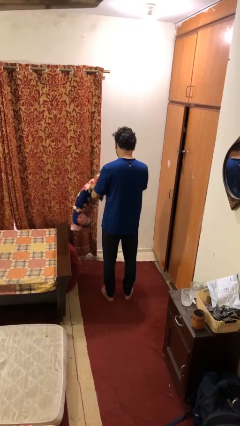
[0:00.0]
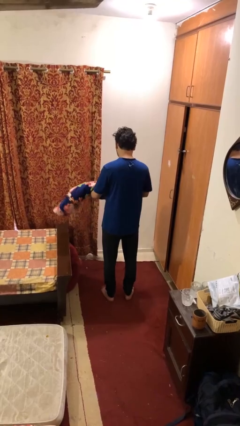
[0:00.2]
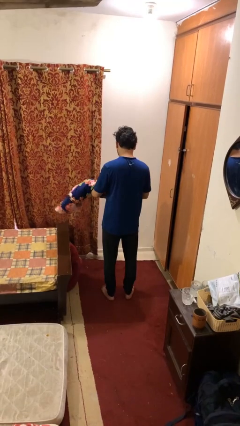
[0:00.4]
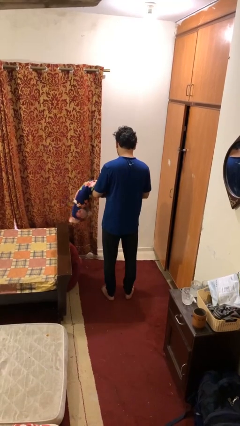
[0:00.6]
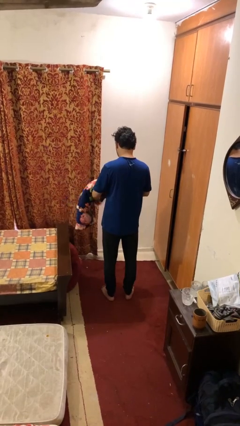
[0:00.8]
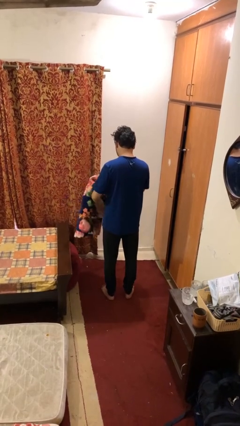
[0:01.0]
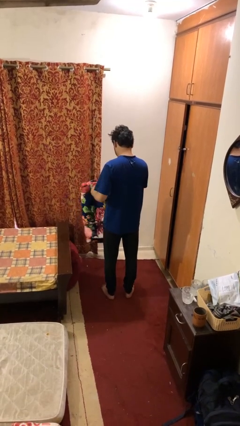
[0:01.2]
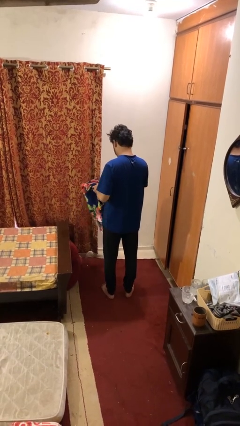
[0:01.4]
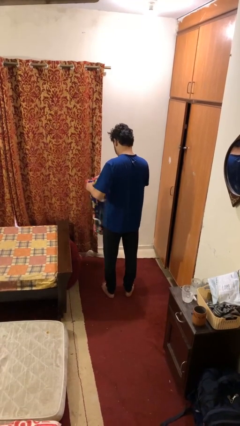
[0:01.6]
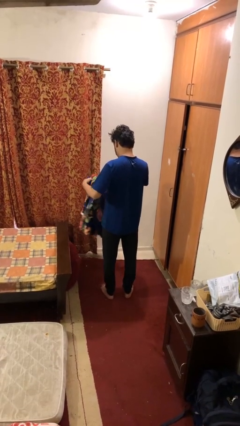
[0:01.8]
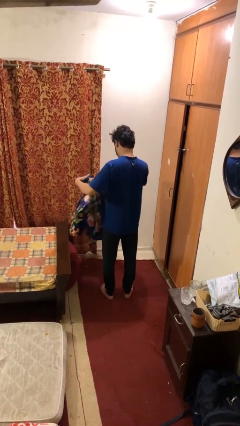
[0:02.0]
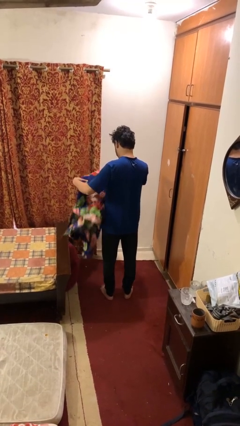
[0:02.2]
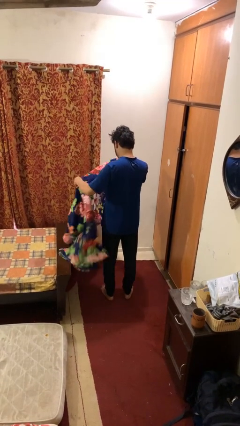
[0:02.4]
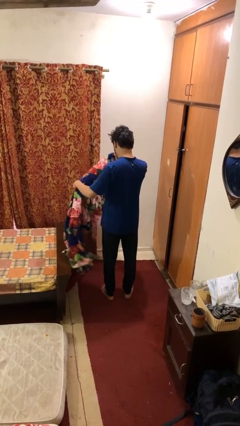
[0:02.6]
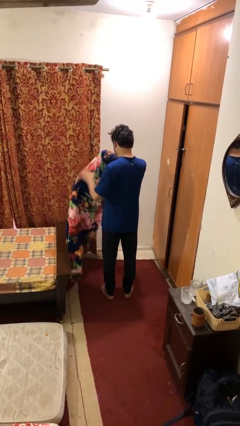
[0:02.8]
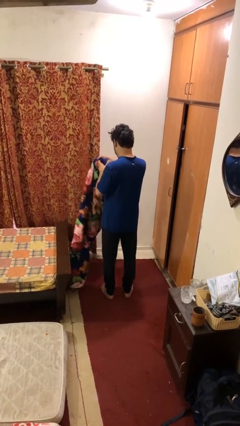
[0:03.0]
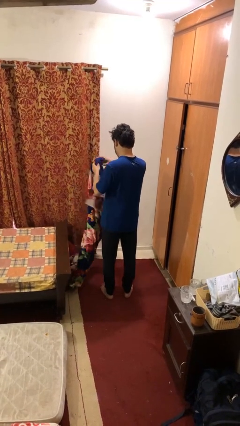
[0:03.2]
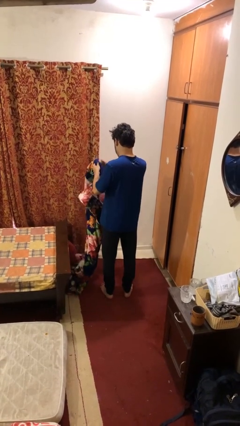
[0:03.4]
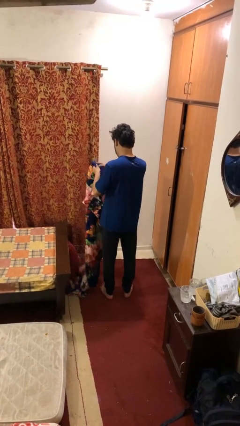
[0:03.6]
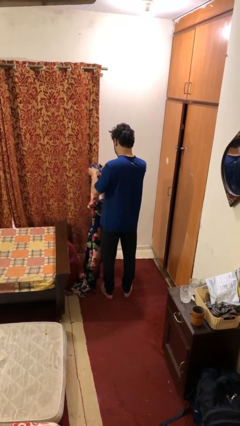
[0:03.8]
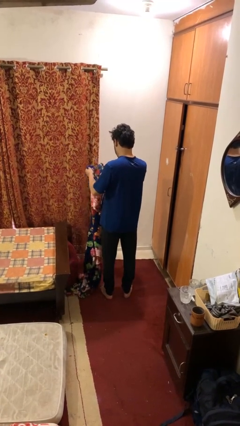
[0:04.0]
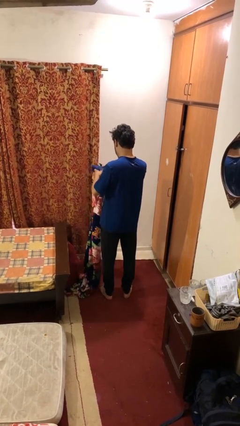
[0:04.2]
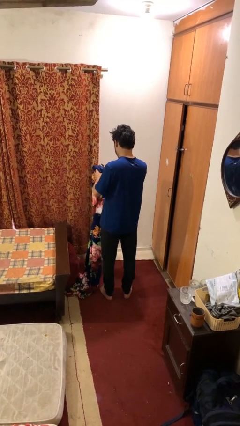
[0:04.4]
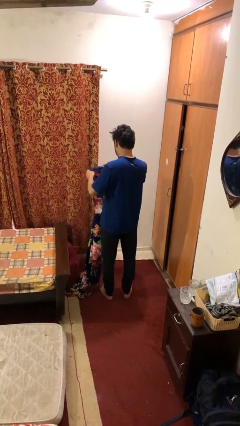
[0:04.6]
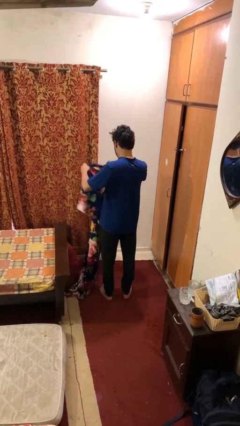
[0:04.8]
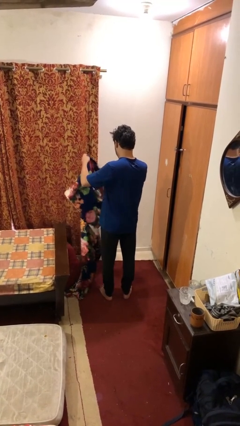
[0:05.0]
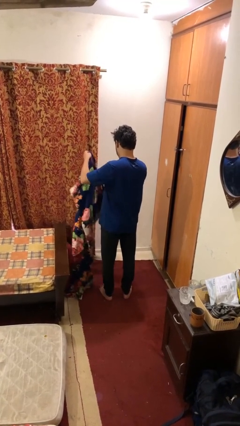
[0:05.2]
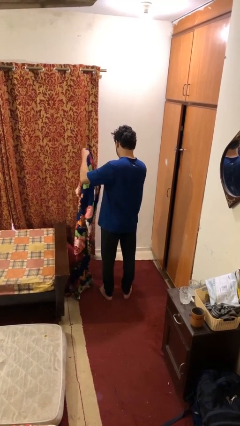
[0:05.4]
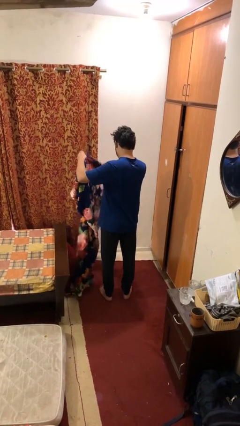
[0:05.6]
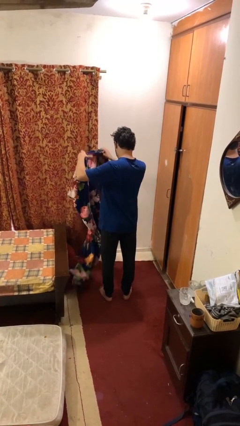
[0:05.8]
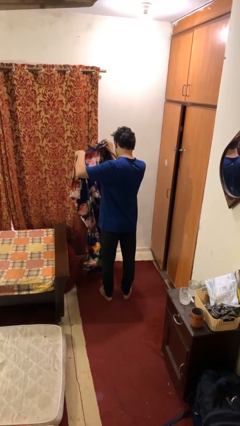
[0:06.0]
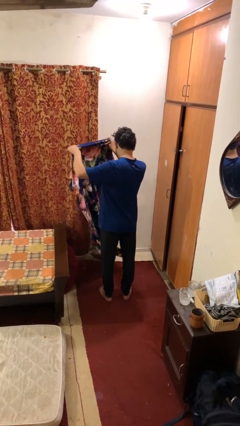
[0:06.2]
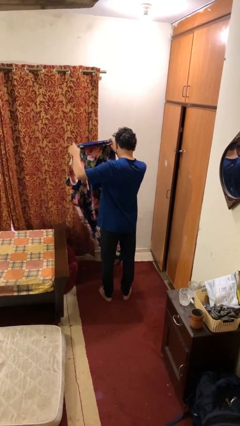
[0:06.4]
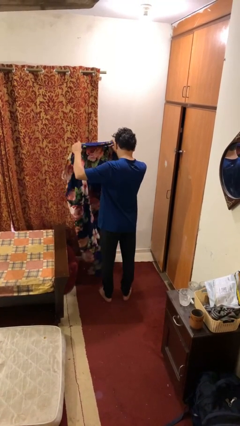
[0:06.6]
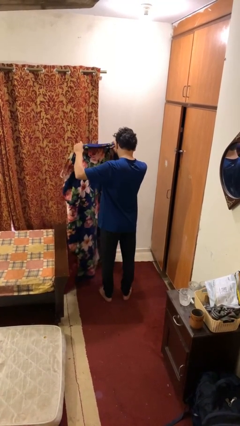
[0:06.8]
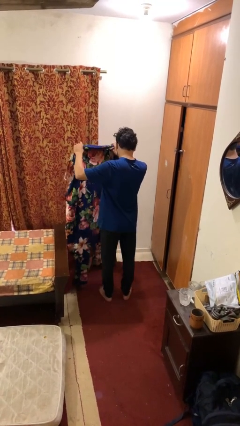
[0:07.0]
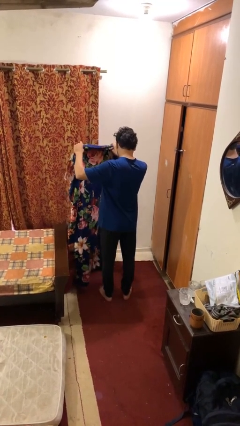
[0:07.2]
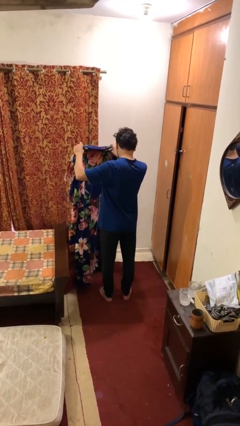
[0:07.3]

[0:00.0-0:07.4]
person unfolds blanket

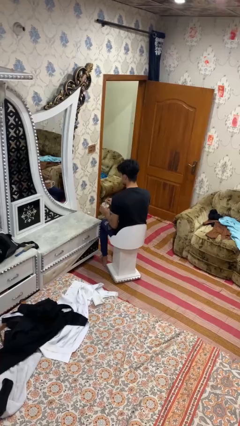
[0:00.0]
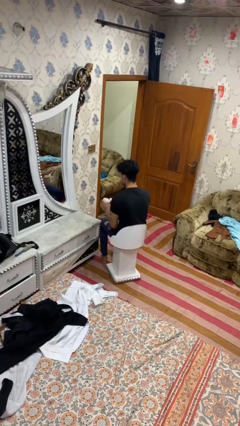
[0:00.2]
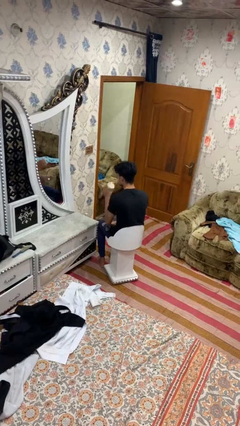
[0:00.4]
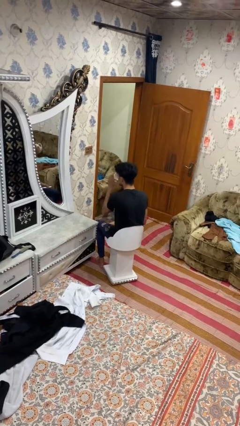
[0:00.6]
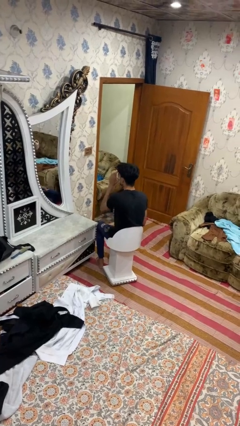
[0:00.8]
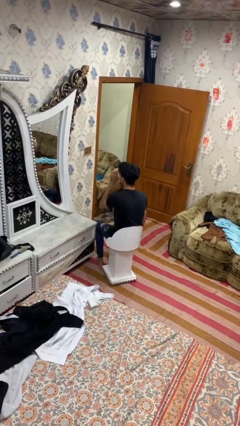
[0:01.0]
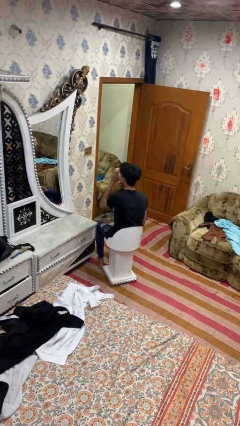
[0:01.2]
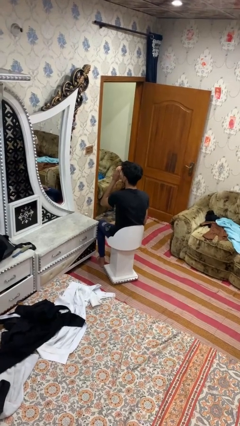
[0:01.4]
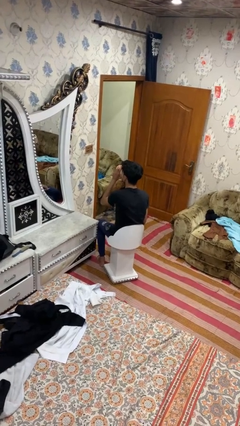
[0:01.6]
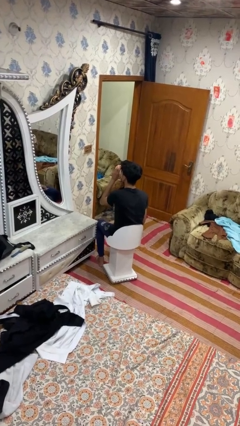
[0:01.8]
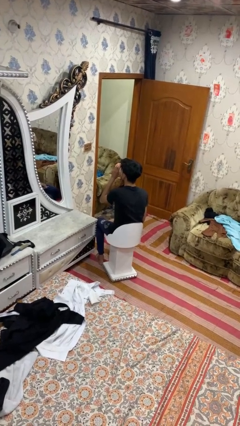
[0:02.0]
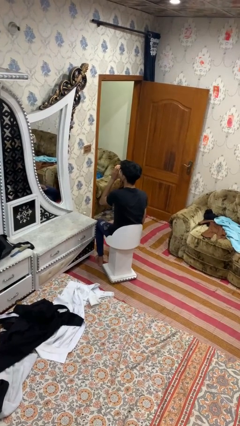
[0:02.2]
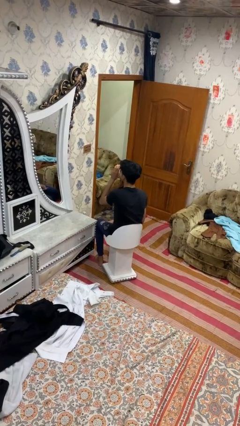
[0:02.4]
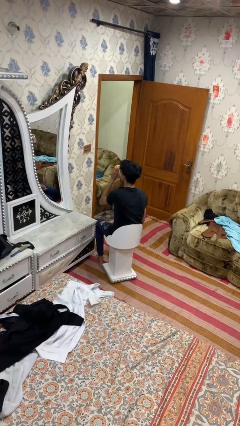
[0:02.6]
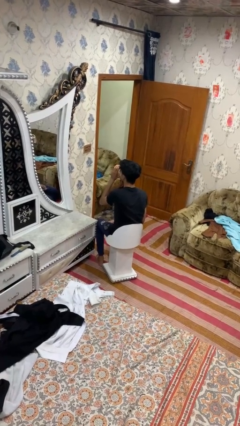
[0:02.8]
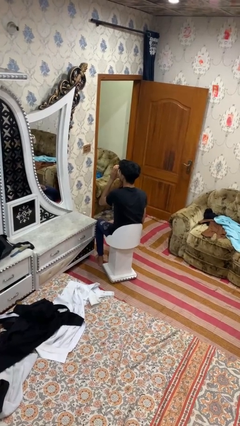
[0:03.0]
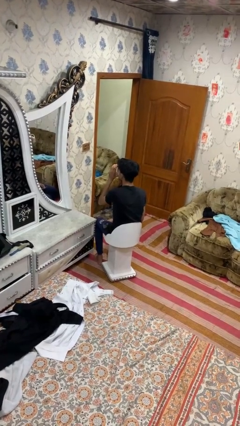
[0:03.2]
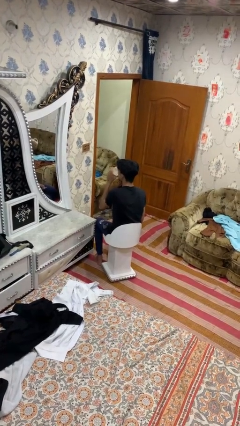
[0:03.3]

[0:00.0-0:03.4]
person drinks from mug

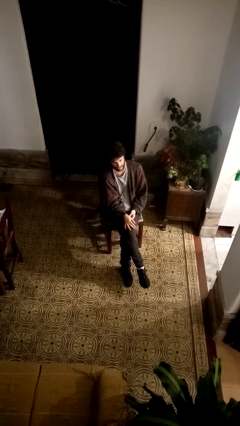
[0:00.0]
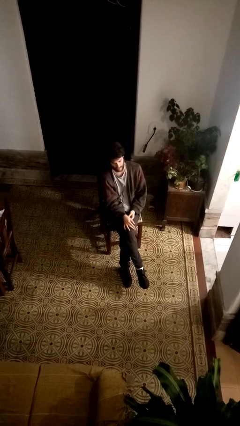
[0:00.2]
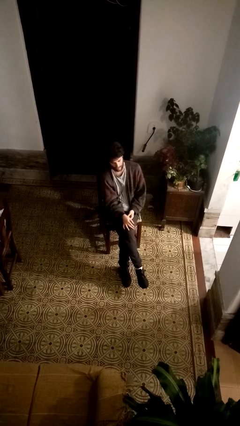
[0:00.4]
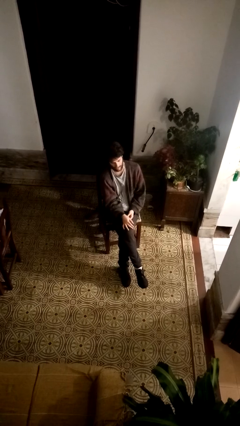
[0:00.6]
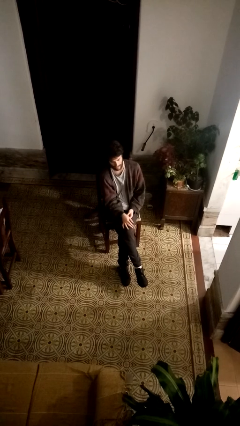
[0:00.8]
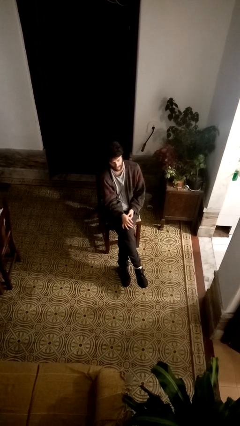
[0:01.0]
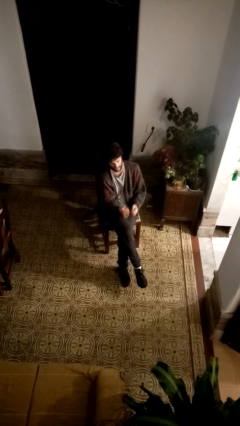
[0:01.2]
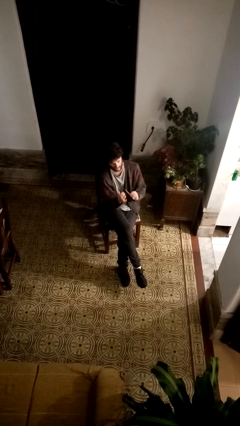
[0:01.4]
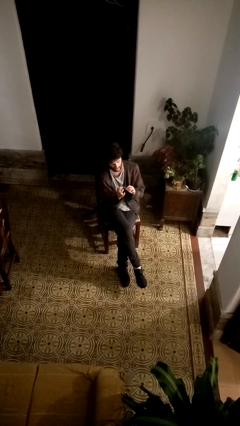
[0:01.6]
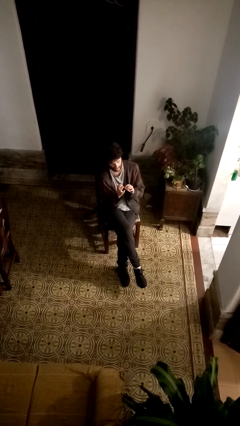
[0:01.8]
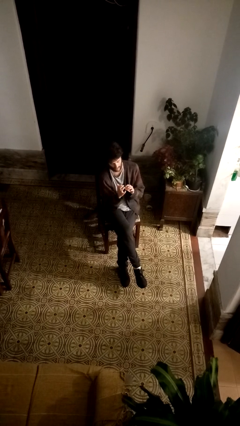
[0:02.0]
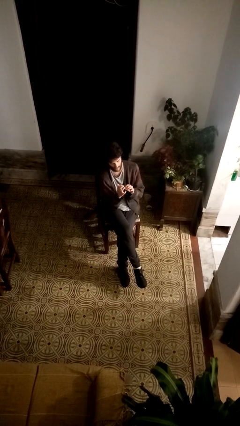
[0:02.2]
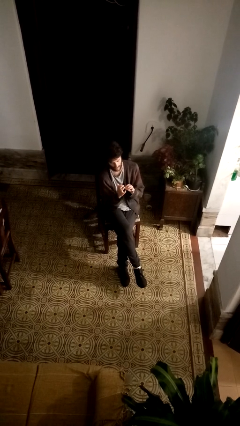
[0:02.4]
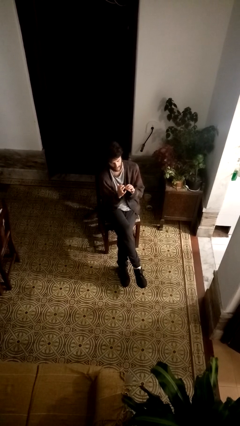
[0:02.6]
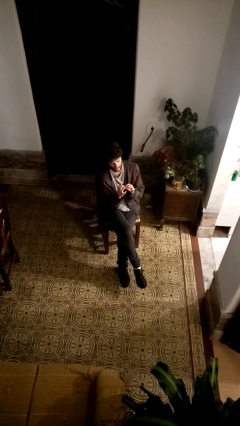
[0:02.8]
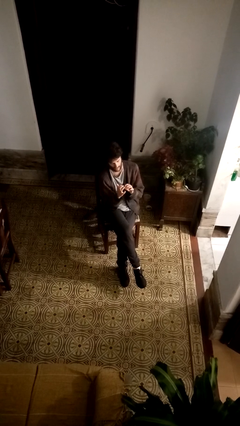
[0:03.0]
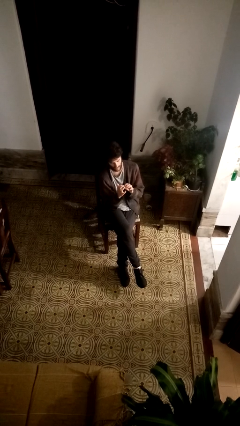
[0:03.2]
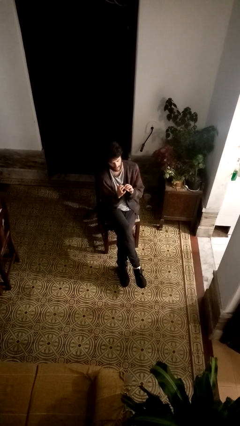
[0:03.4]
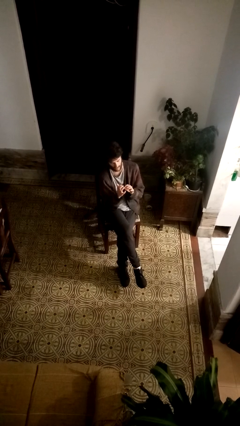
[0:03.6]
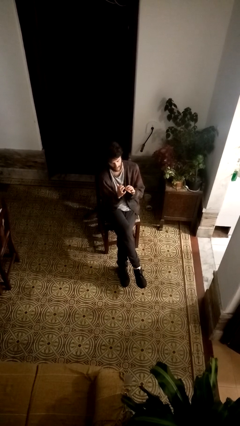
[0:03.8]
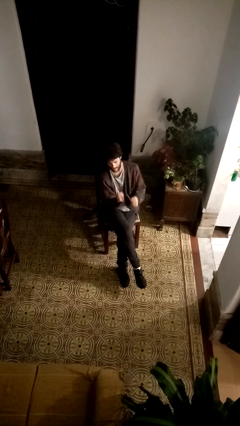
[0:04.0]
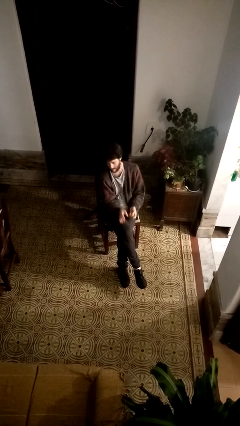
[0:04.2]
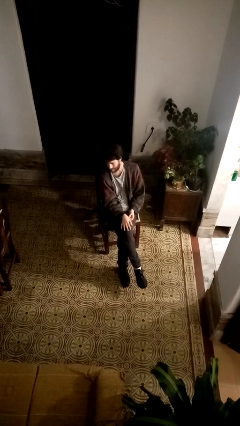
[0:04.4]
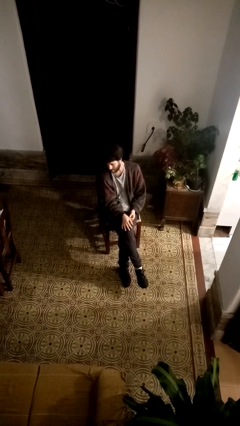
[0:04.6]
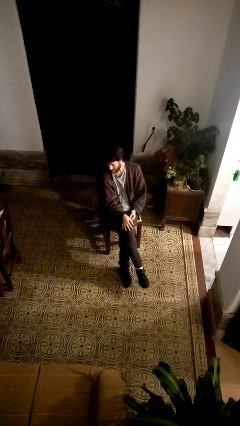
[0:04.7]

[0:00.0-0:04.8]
person files fingernails

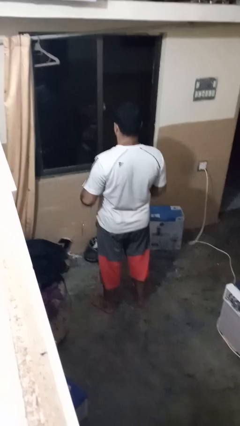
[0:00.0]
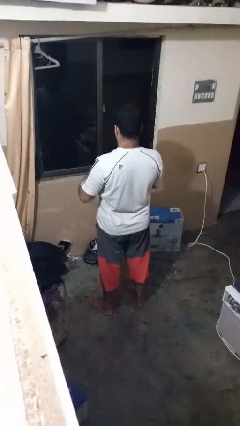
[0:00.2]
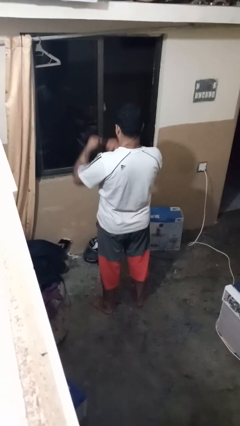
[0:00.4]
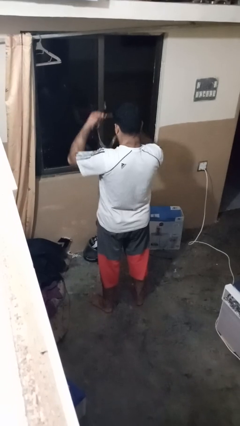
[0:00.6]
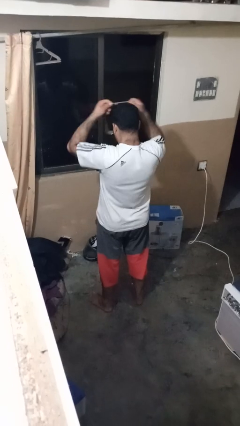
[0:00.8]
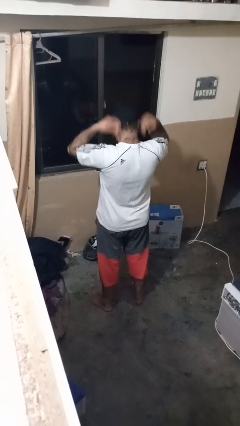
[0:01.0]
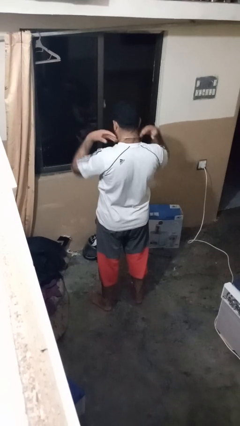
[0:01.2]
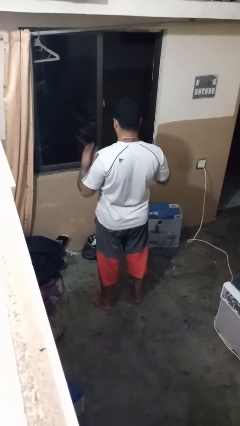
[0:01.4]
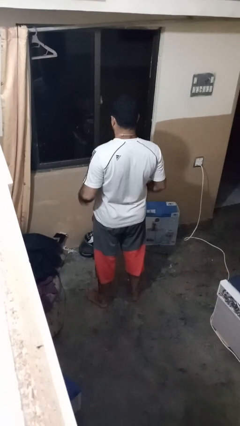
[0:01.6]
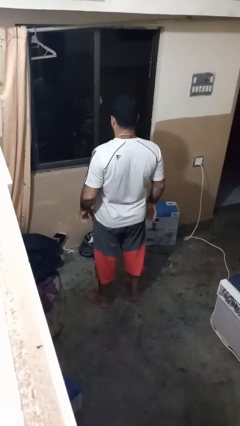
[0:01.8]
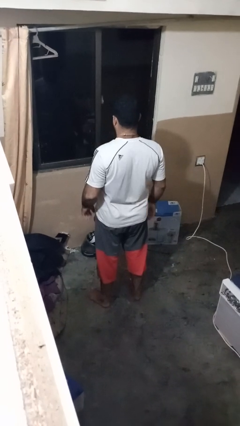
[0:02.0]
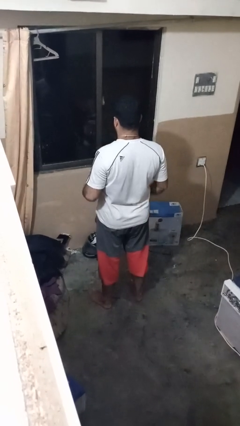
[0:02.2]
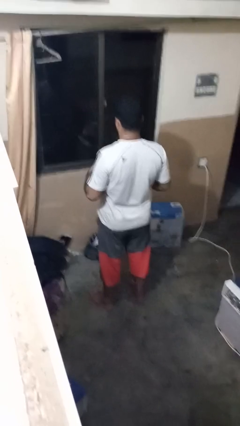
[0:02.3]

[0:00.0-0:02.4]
person puts on necklace
